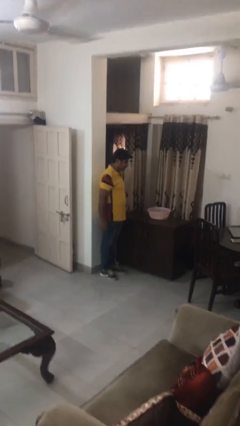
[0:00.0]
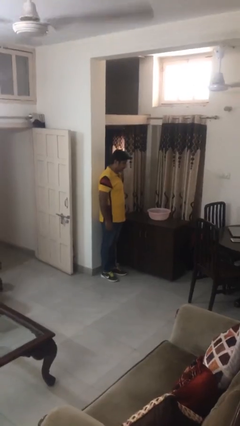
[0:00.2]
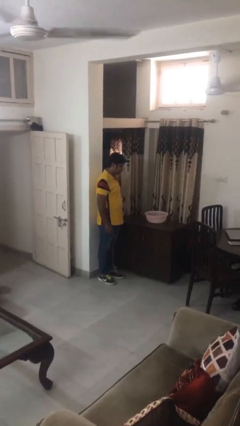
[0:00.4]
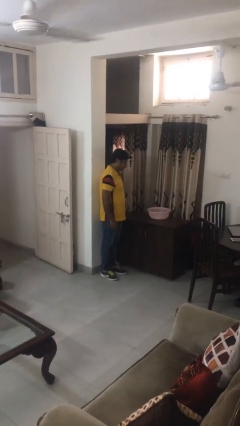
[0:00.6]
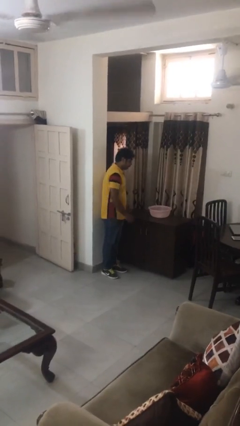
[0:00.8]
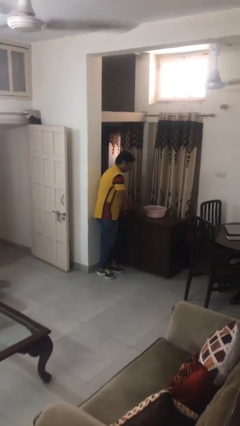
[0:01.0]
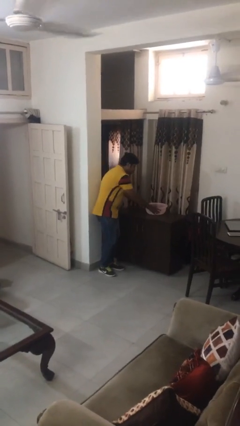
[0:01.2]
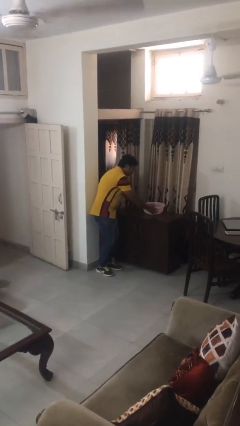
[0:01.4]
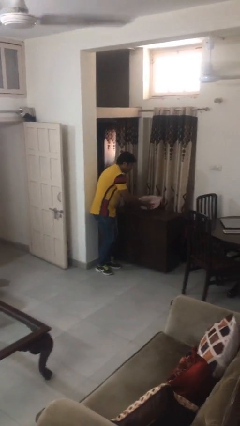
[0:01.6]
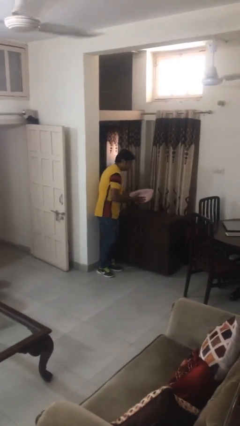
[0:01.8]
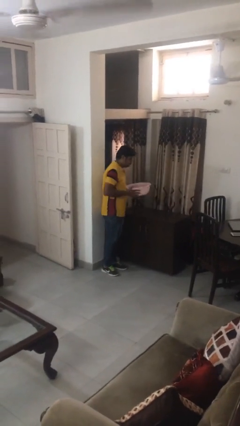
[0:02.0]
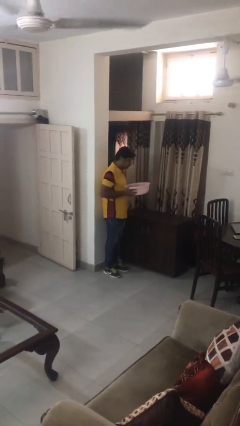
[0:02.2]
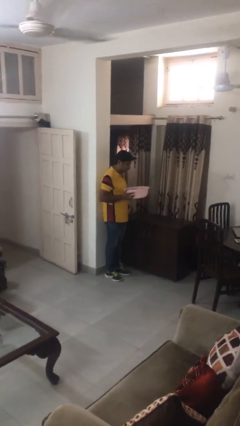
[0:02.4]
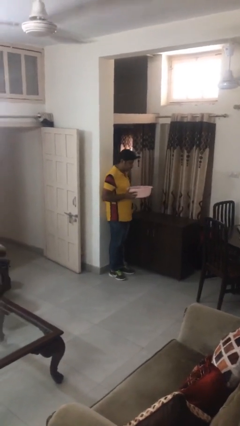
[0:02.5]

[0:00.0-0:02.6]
person picks up object from countertop

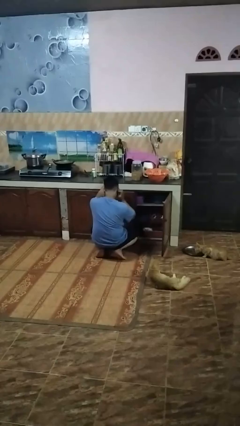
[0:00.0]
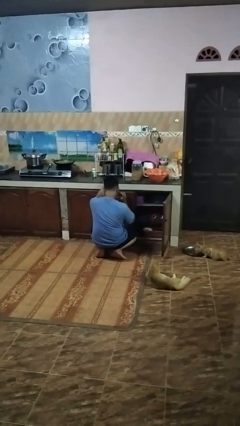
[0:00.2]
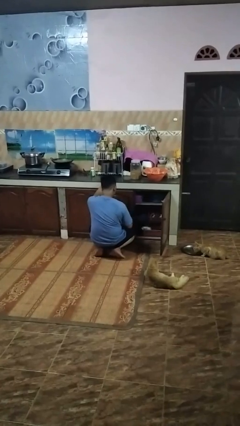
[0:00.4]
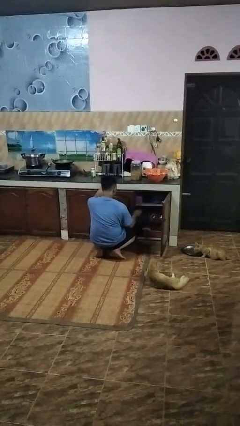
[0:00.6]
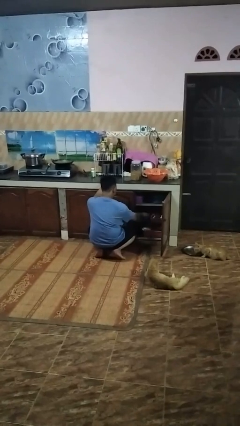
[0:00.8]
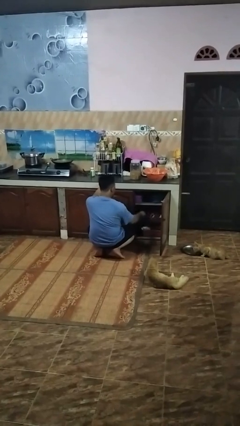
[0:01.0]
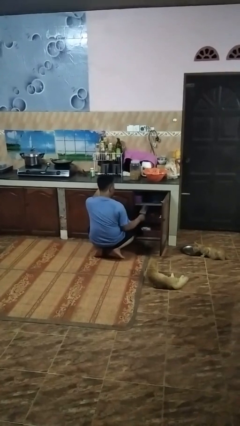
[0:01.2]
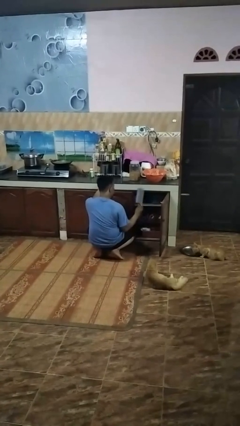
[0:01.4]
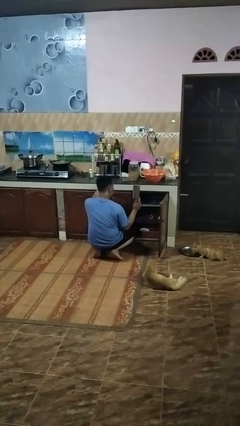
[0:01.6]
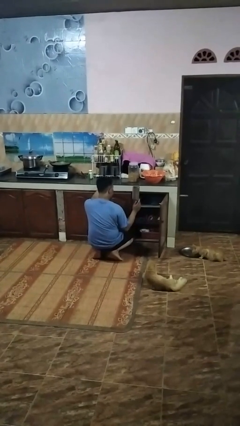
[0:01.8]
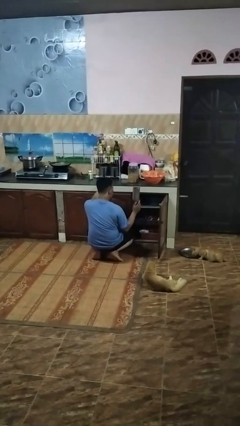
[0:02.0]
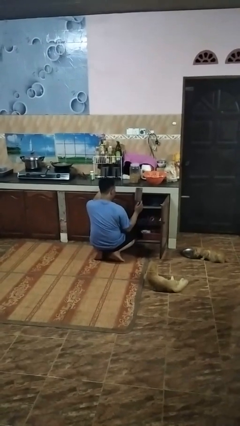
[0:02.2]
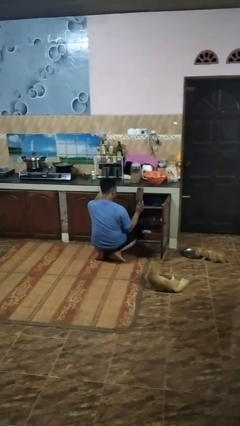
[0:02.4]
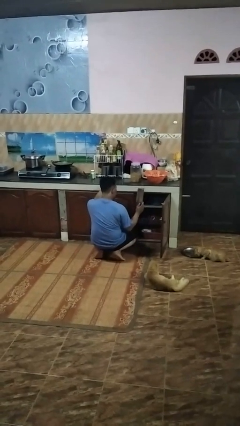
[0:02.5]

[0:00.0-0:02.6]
person takes object from kitchen drawer

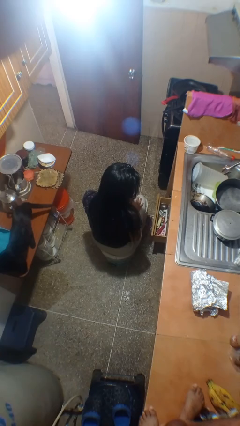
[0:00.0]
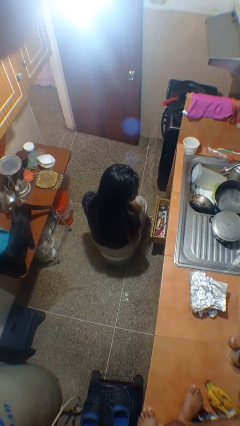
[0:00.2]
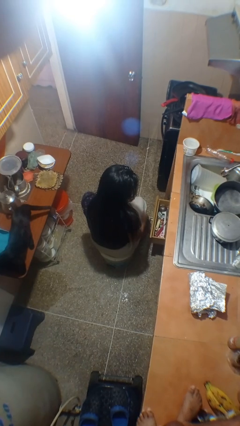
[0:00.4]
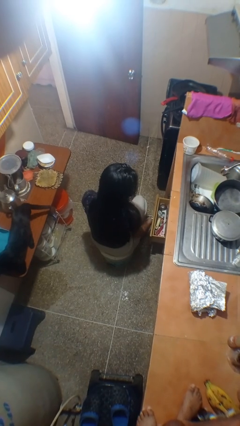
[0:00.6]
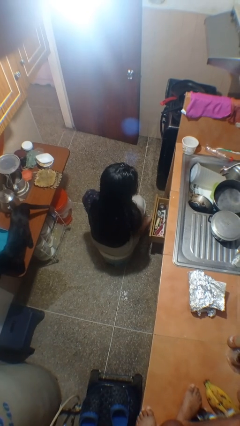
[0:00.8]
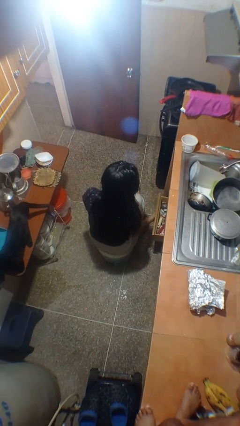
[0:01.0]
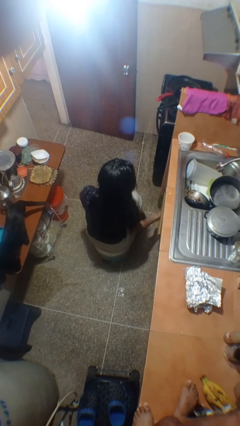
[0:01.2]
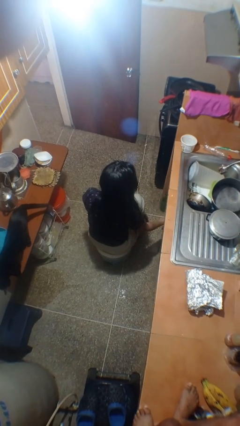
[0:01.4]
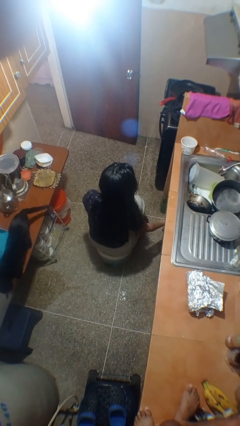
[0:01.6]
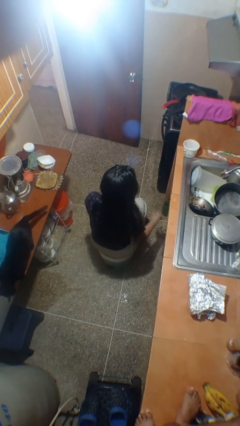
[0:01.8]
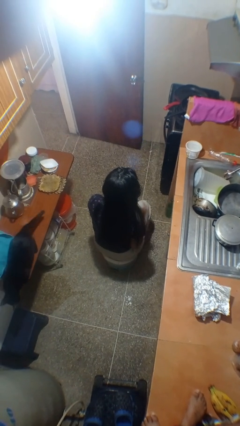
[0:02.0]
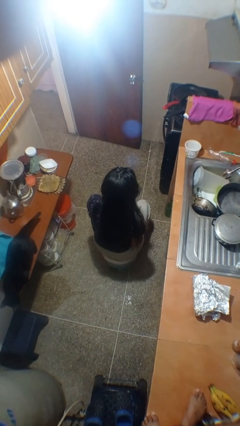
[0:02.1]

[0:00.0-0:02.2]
person closes kitchen drawer

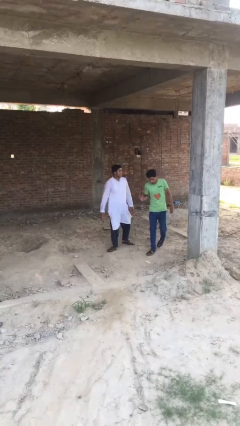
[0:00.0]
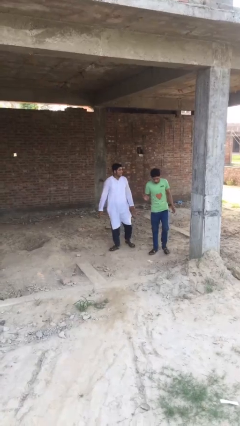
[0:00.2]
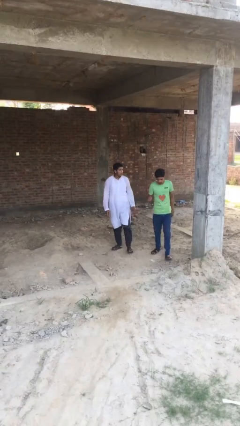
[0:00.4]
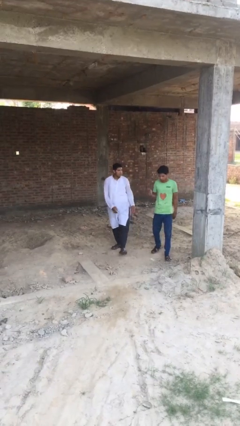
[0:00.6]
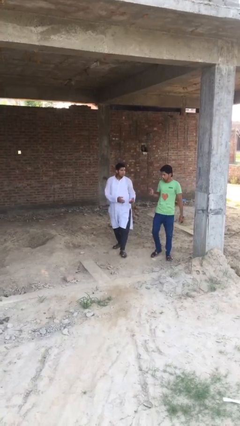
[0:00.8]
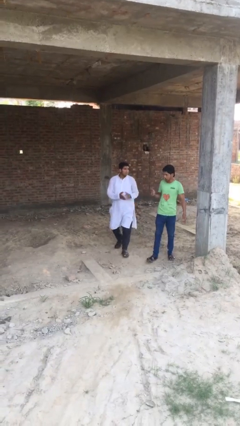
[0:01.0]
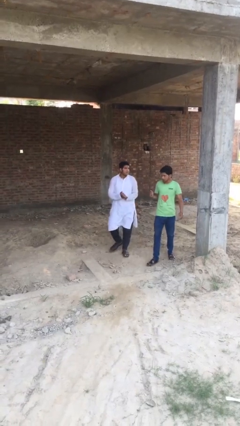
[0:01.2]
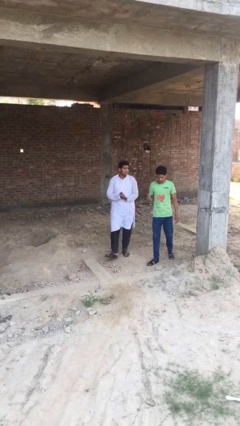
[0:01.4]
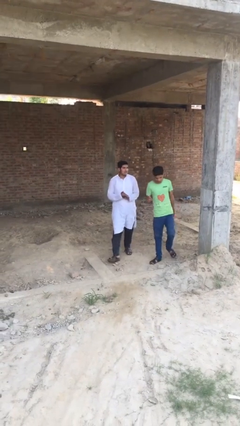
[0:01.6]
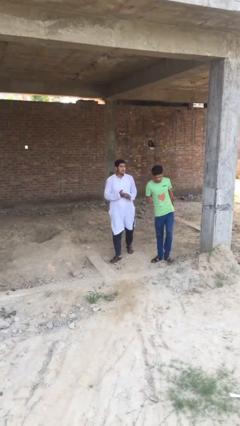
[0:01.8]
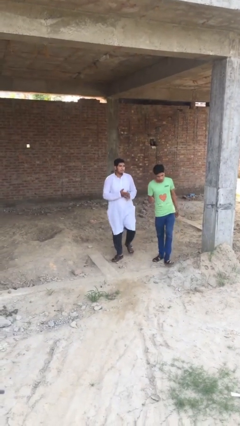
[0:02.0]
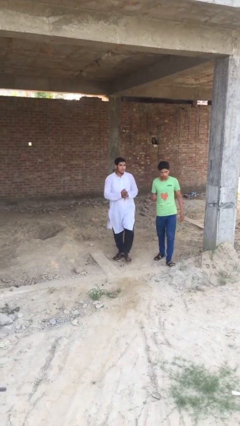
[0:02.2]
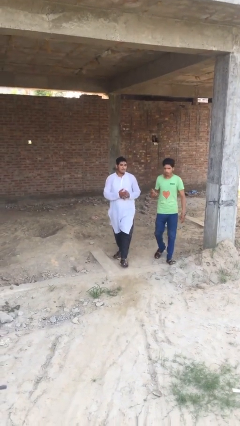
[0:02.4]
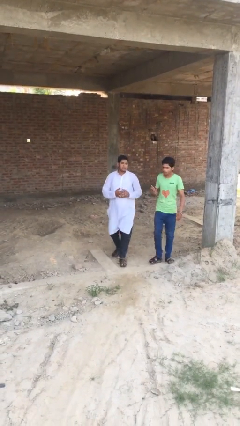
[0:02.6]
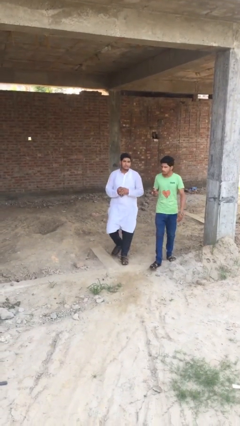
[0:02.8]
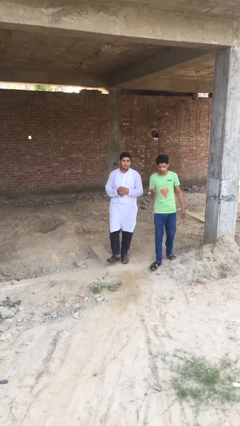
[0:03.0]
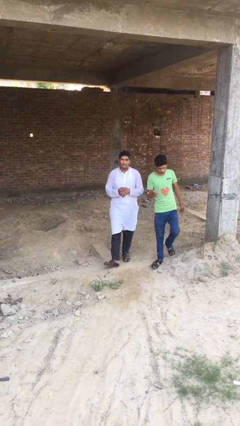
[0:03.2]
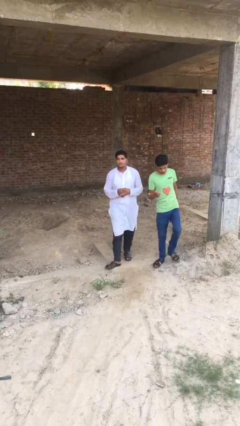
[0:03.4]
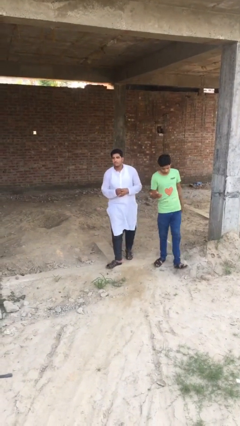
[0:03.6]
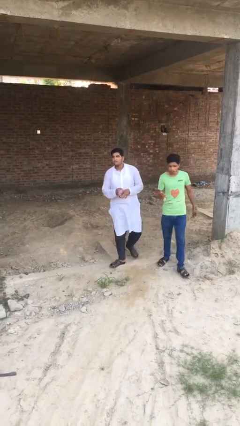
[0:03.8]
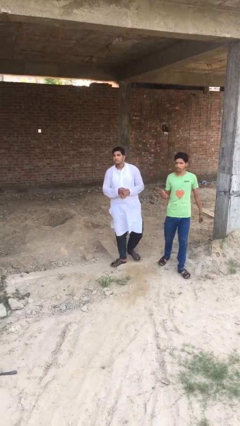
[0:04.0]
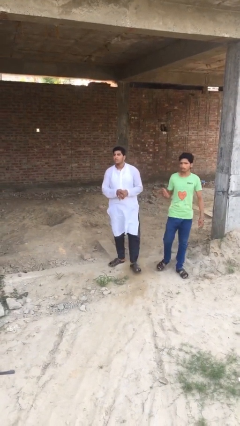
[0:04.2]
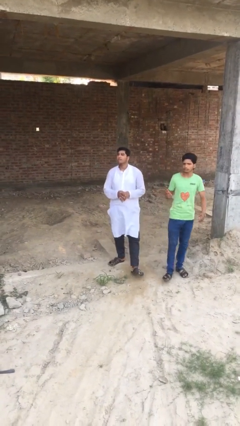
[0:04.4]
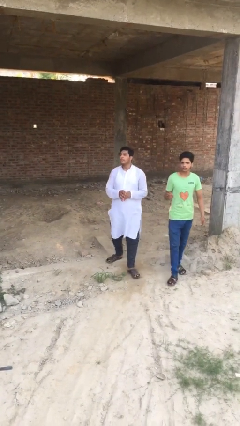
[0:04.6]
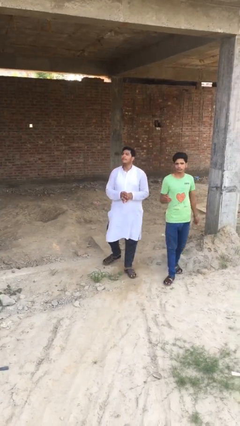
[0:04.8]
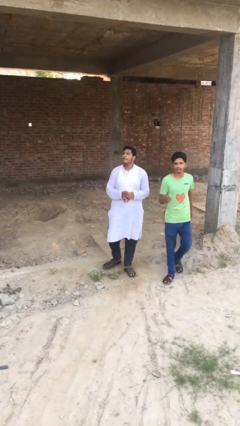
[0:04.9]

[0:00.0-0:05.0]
person talks to person

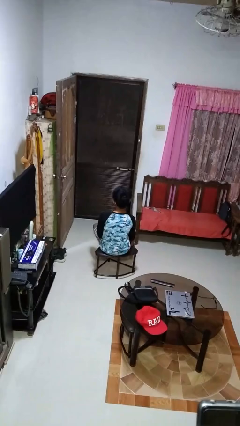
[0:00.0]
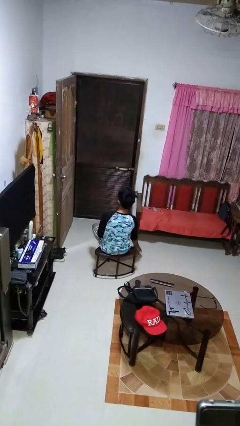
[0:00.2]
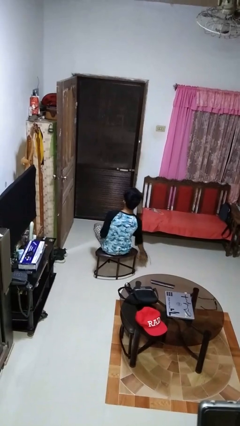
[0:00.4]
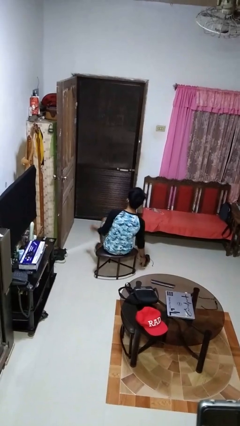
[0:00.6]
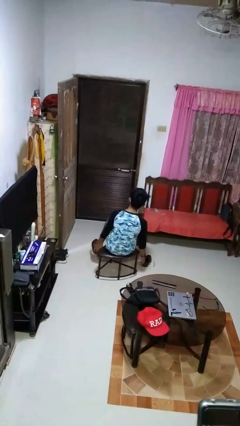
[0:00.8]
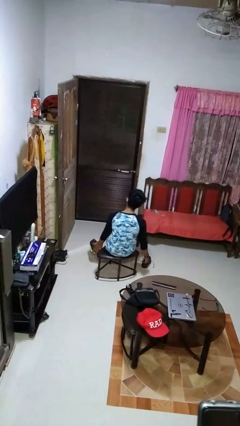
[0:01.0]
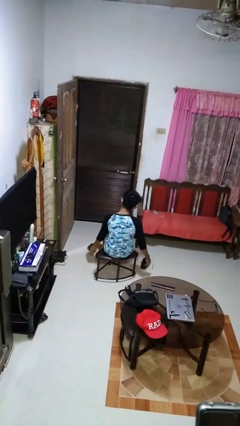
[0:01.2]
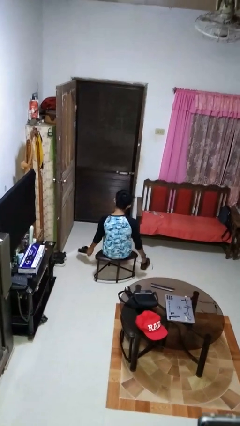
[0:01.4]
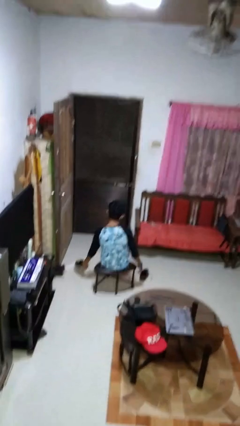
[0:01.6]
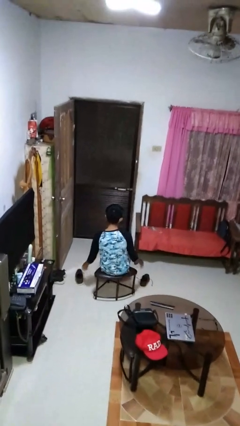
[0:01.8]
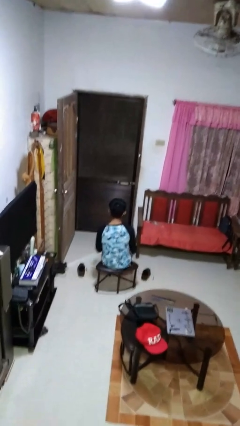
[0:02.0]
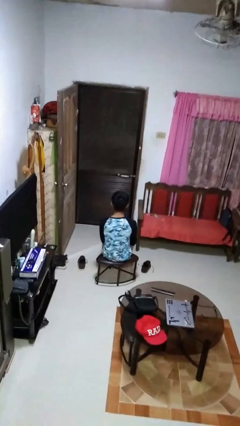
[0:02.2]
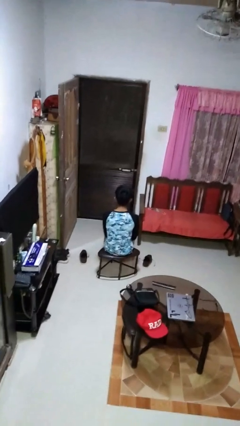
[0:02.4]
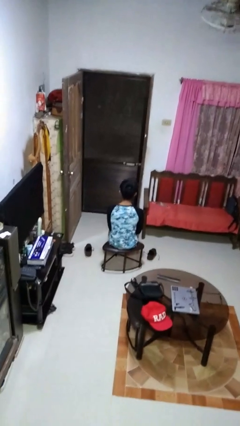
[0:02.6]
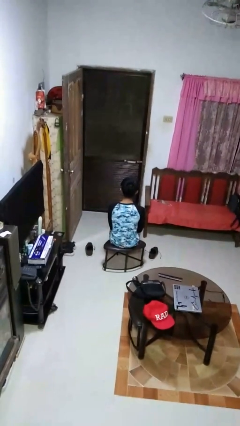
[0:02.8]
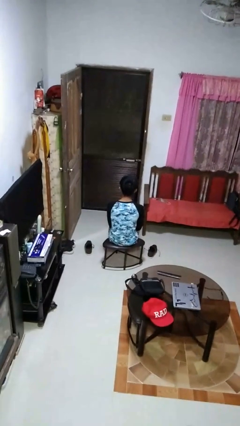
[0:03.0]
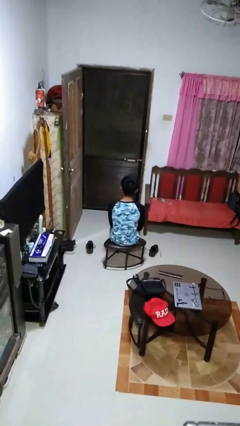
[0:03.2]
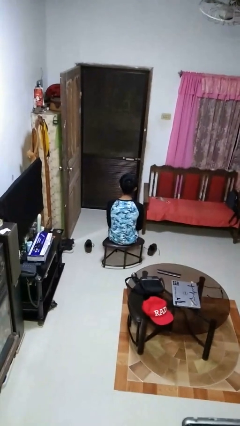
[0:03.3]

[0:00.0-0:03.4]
person takes off shoes
